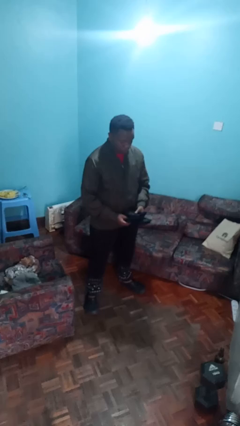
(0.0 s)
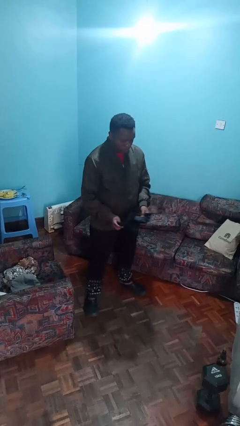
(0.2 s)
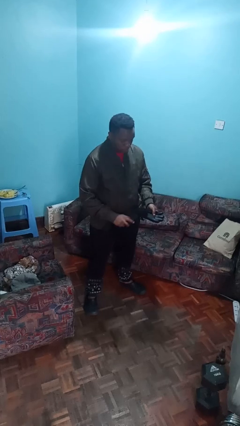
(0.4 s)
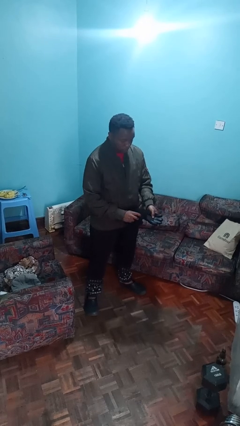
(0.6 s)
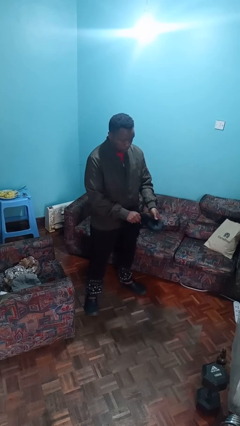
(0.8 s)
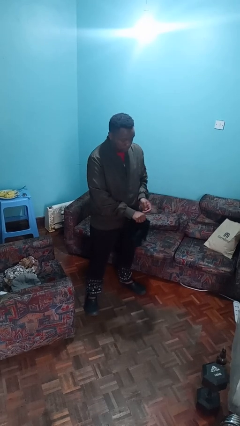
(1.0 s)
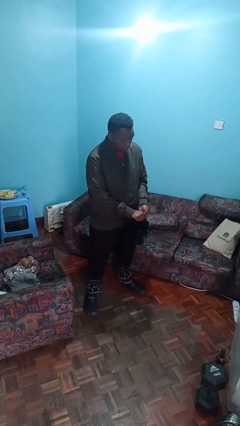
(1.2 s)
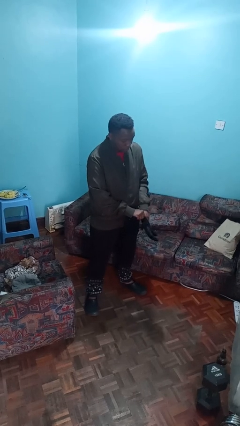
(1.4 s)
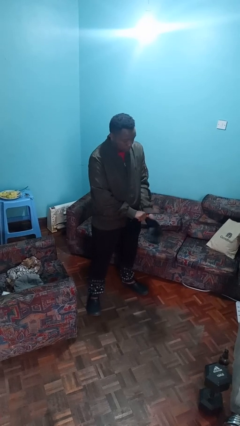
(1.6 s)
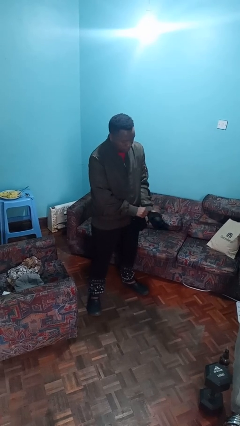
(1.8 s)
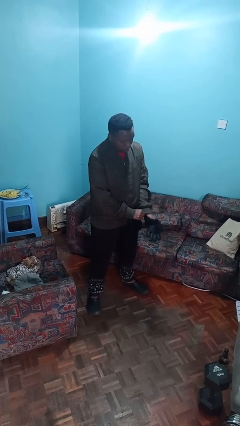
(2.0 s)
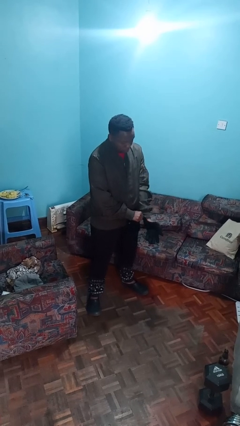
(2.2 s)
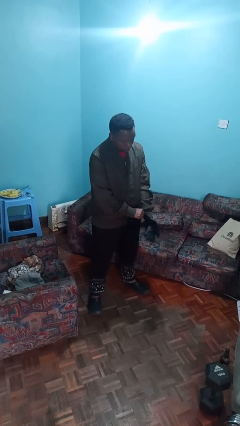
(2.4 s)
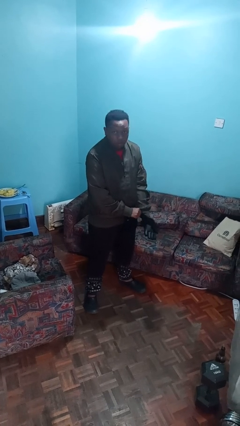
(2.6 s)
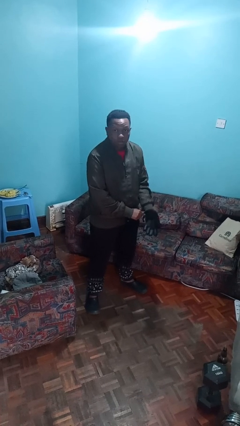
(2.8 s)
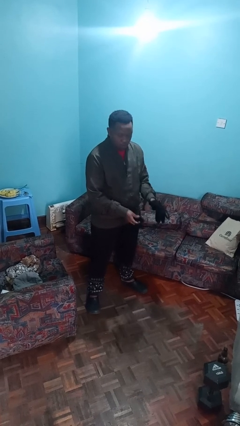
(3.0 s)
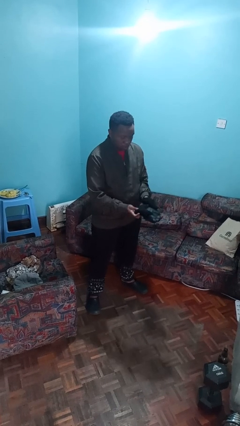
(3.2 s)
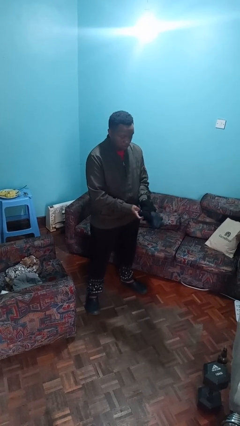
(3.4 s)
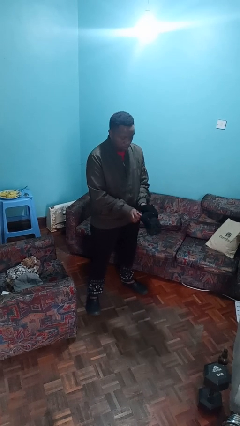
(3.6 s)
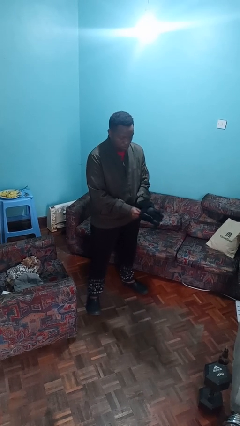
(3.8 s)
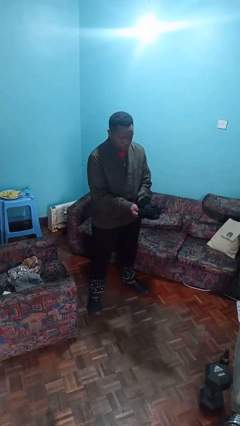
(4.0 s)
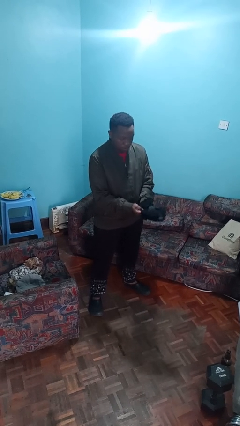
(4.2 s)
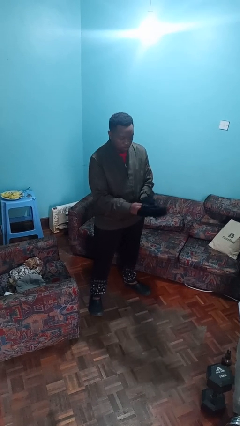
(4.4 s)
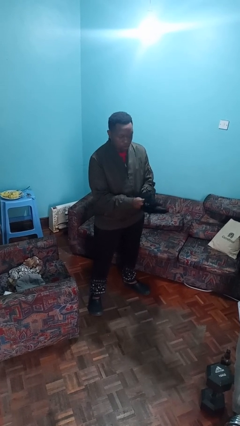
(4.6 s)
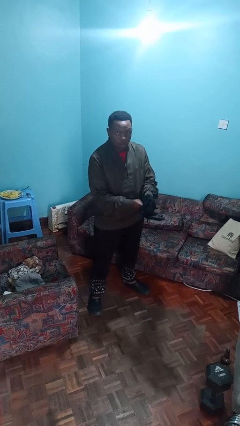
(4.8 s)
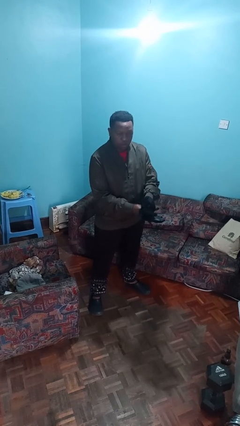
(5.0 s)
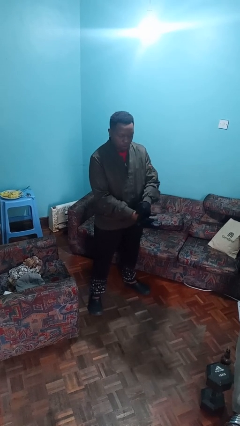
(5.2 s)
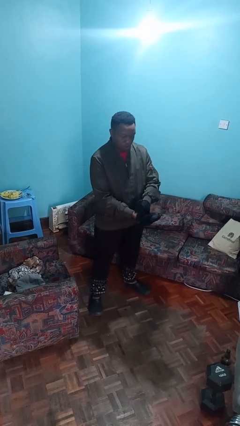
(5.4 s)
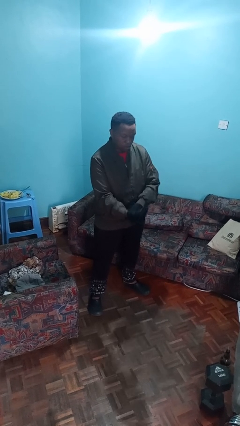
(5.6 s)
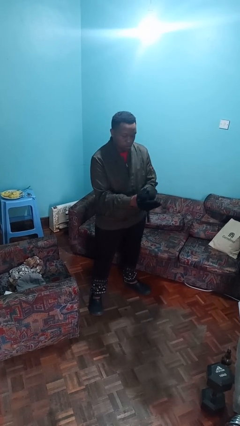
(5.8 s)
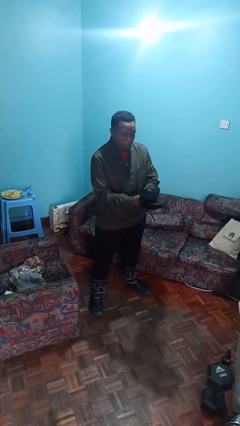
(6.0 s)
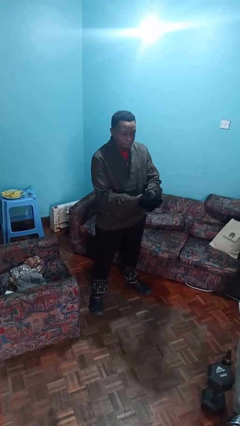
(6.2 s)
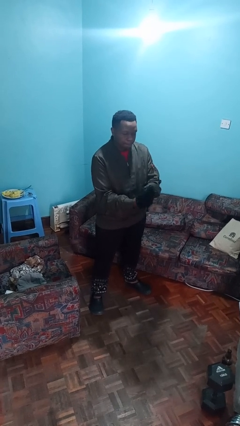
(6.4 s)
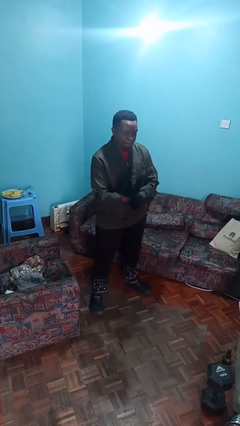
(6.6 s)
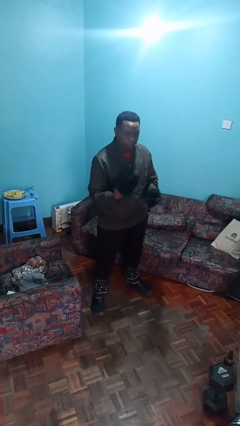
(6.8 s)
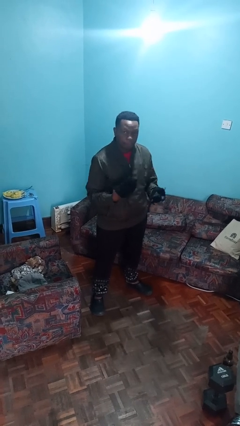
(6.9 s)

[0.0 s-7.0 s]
person puts on gloves

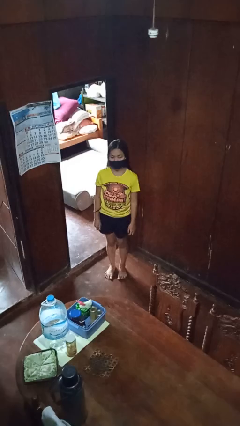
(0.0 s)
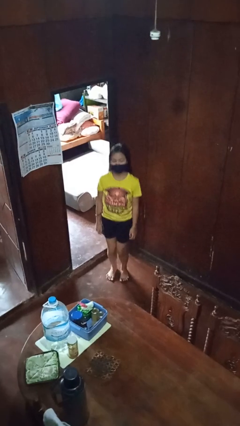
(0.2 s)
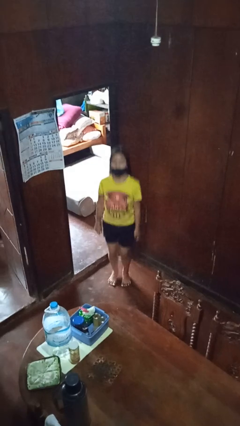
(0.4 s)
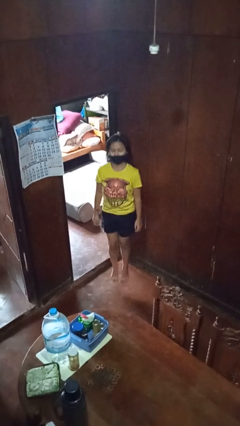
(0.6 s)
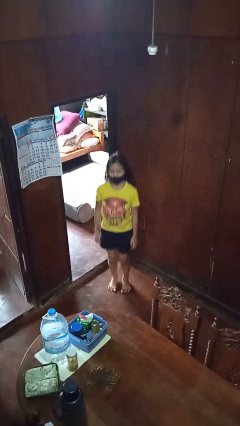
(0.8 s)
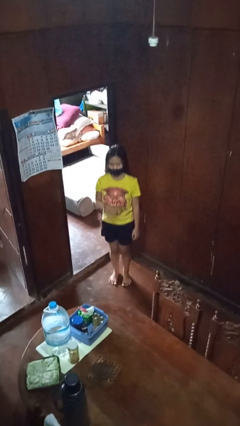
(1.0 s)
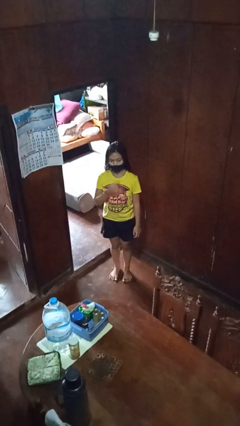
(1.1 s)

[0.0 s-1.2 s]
person jumps

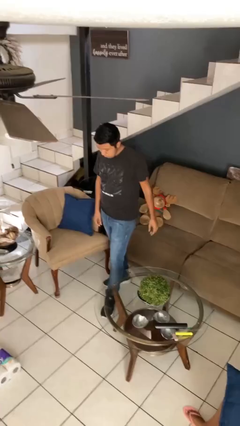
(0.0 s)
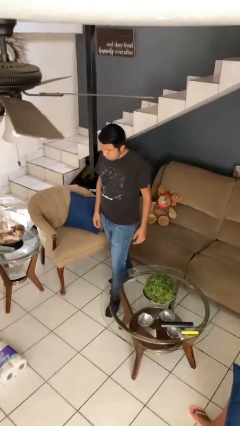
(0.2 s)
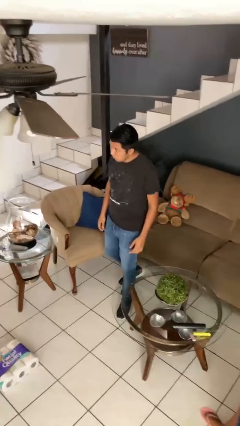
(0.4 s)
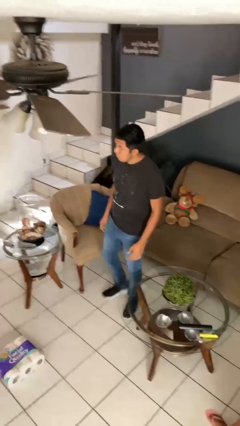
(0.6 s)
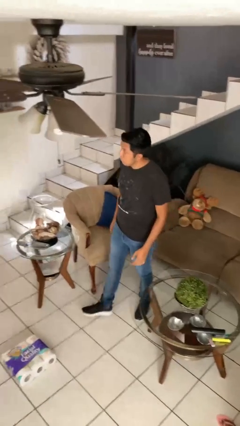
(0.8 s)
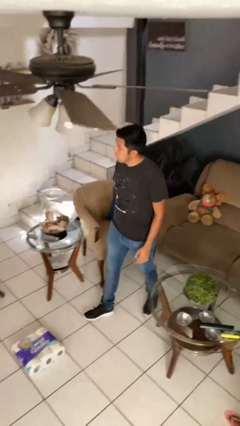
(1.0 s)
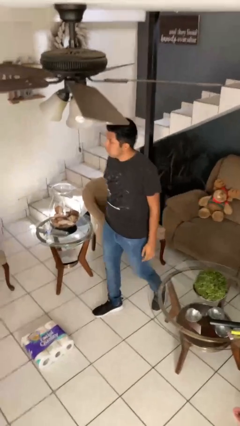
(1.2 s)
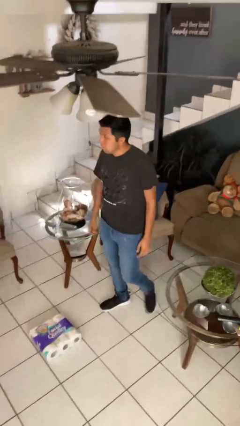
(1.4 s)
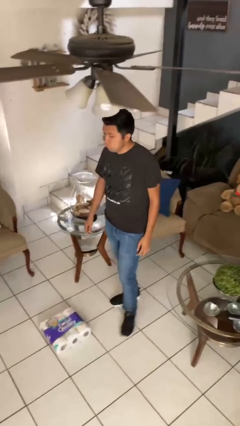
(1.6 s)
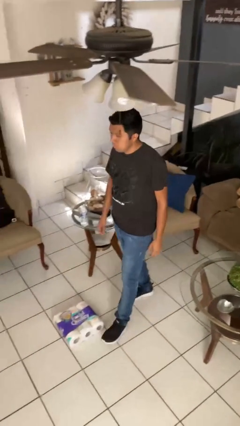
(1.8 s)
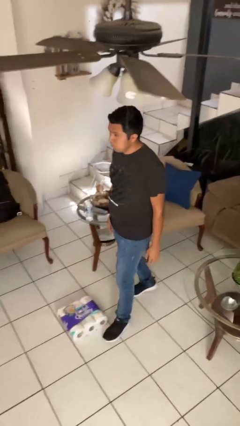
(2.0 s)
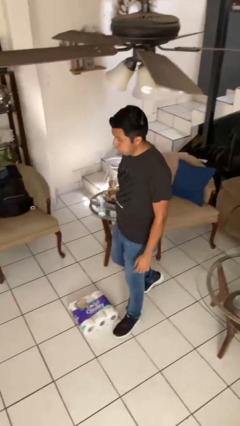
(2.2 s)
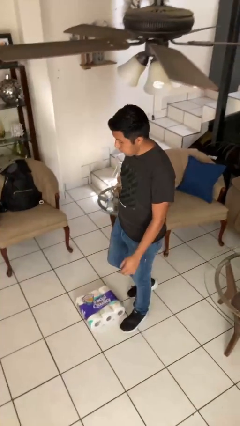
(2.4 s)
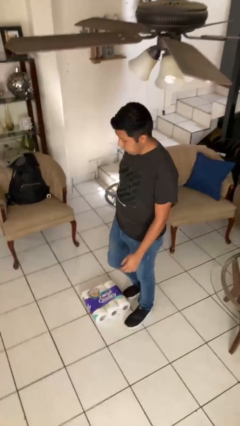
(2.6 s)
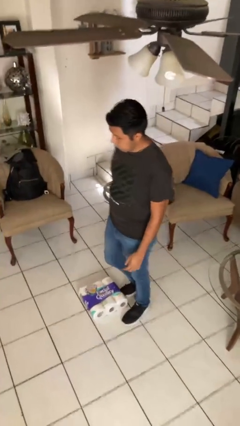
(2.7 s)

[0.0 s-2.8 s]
person trips on object on floor

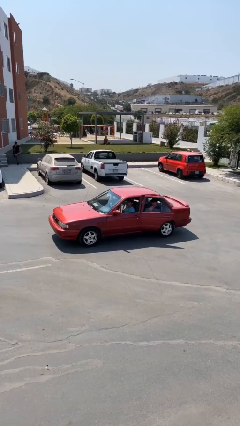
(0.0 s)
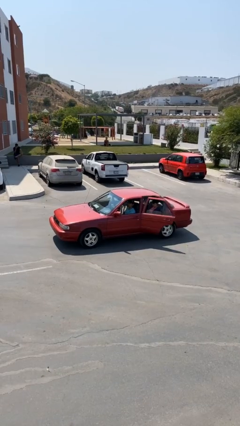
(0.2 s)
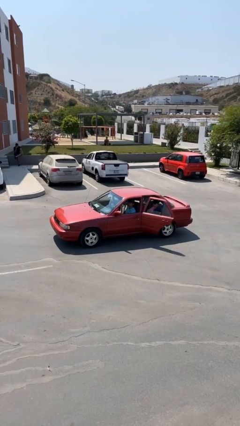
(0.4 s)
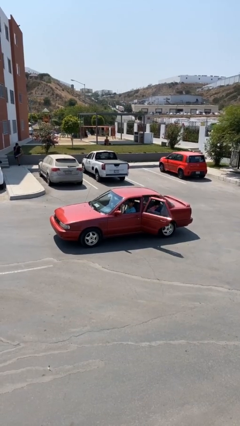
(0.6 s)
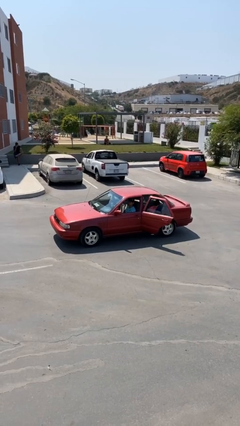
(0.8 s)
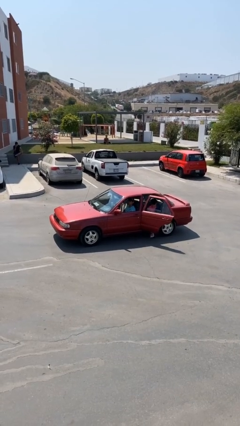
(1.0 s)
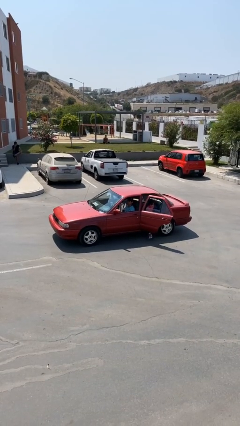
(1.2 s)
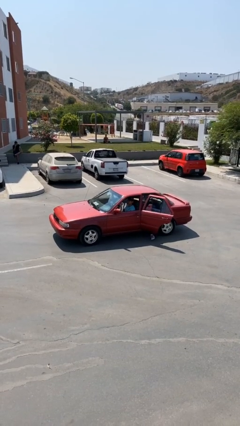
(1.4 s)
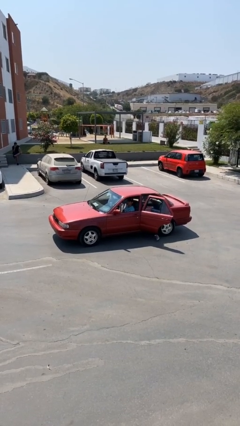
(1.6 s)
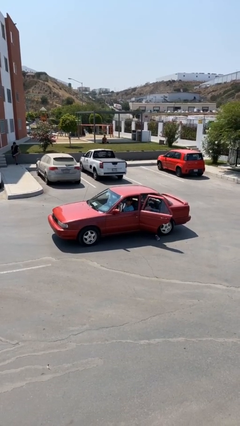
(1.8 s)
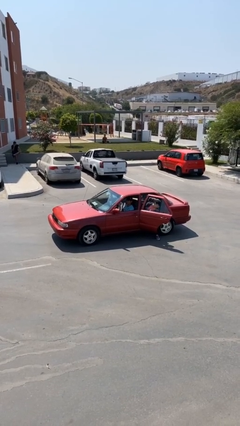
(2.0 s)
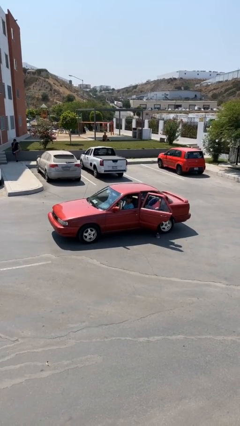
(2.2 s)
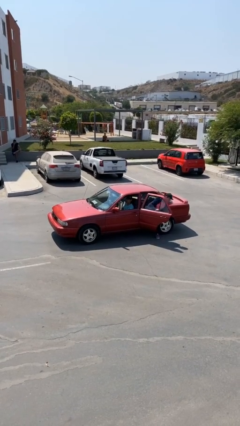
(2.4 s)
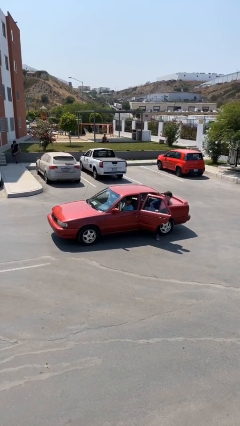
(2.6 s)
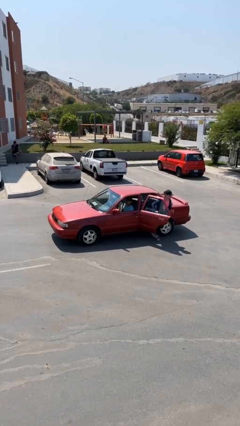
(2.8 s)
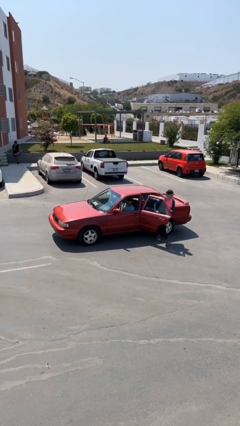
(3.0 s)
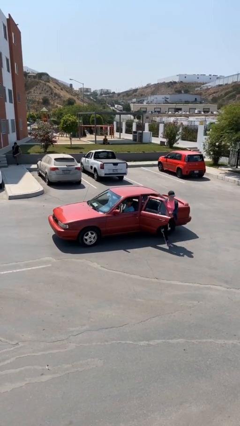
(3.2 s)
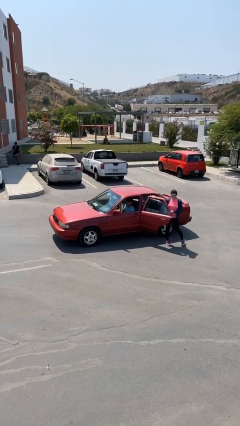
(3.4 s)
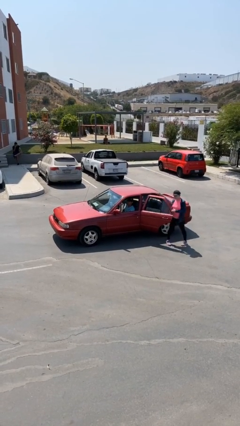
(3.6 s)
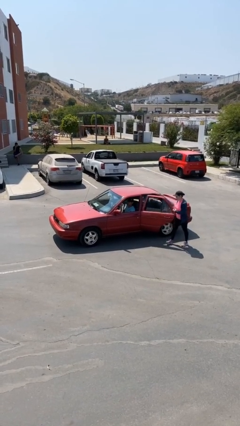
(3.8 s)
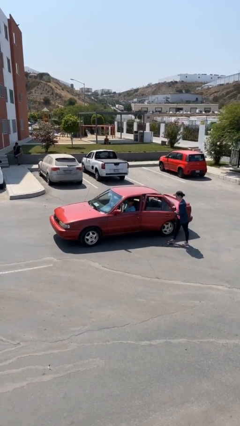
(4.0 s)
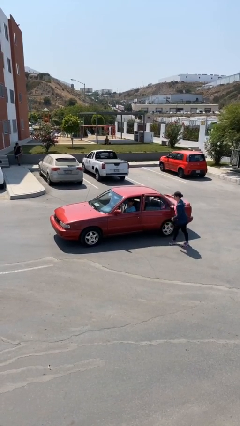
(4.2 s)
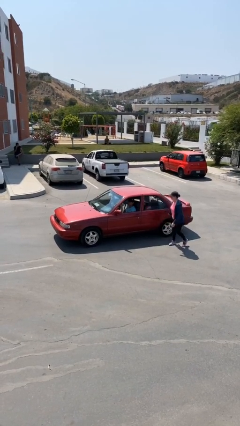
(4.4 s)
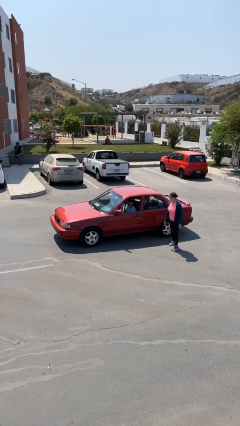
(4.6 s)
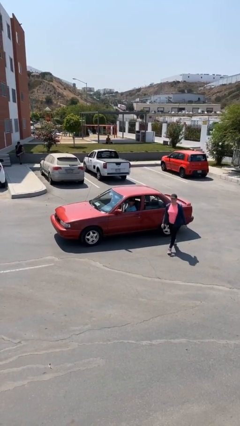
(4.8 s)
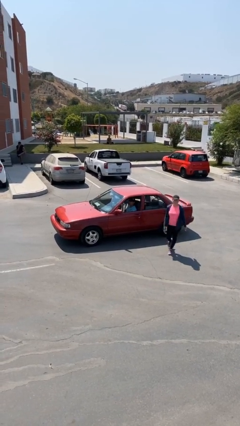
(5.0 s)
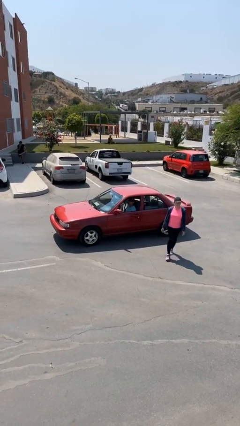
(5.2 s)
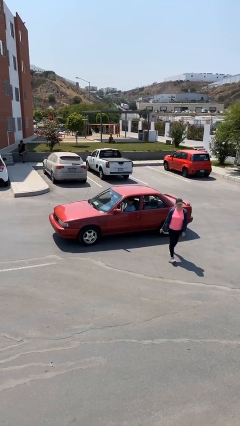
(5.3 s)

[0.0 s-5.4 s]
car drops off person

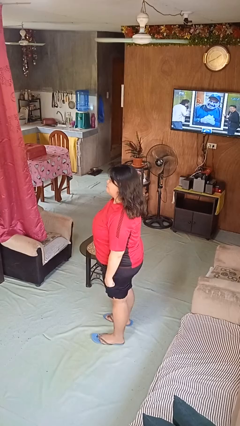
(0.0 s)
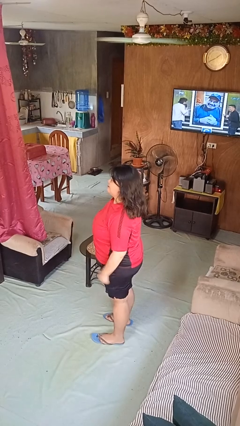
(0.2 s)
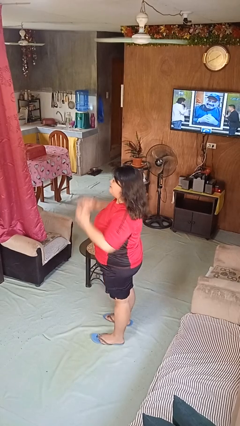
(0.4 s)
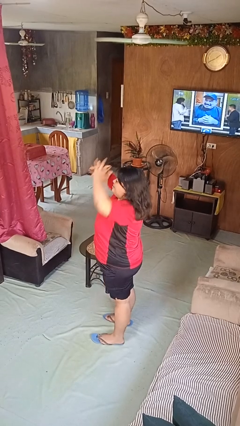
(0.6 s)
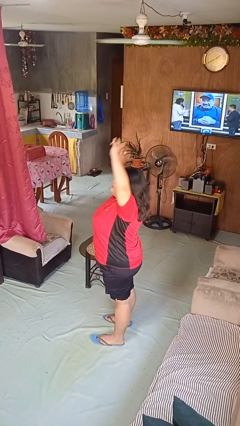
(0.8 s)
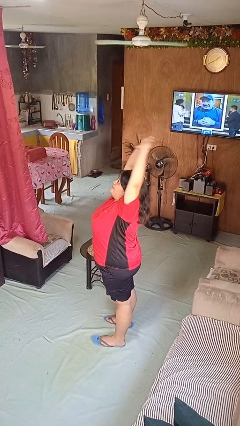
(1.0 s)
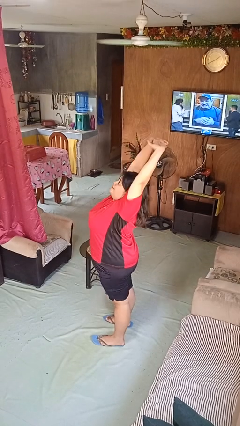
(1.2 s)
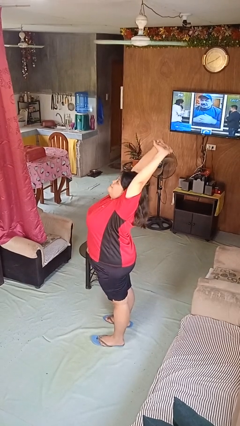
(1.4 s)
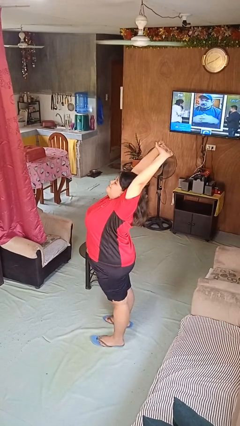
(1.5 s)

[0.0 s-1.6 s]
person stretches arms over head
